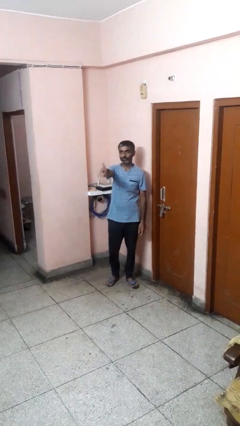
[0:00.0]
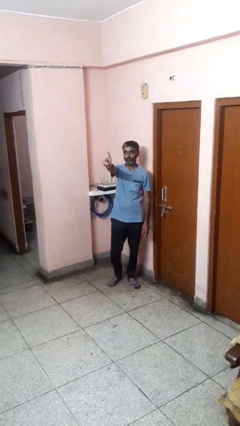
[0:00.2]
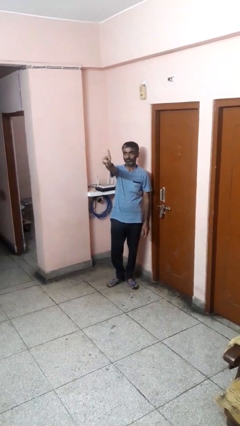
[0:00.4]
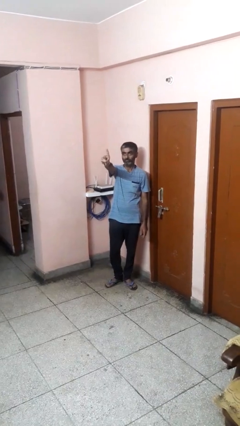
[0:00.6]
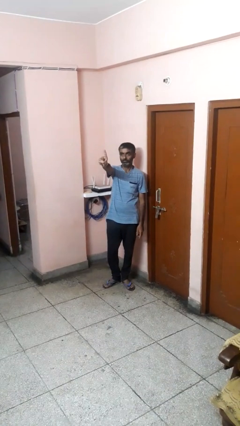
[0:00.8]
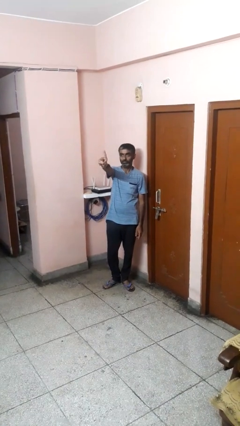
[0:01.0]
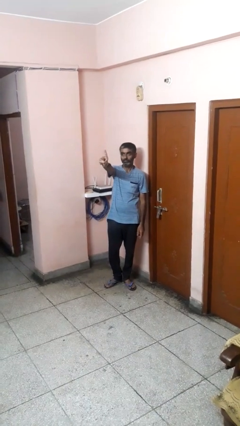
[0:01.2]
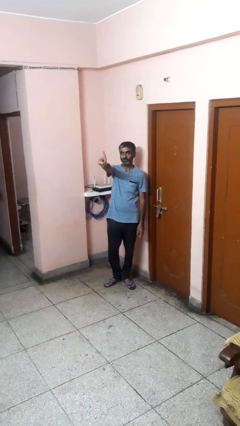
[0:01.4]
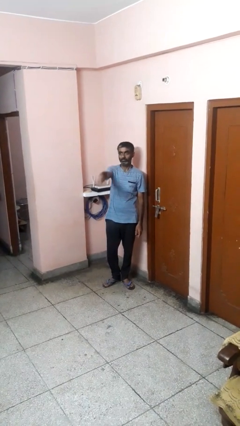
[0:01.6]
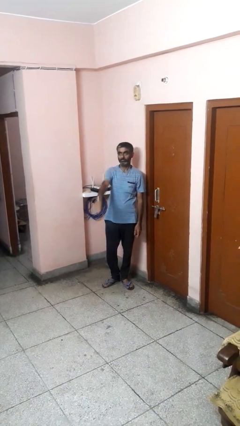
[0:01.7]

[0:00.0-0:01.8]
person gestures number one

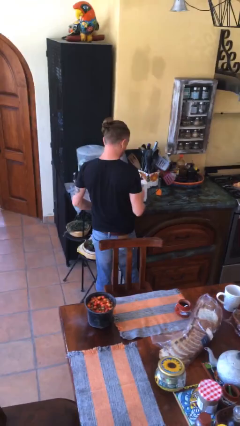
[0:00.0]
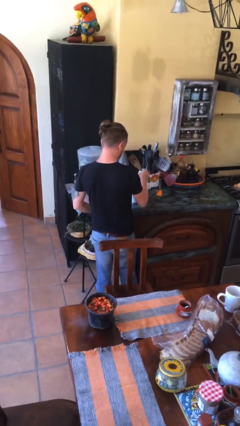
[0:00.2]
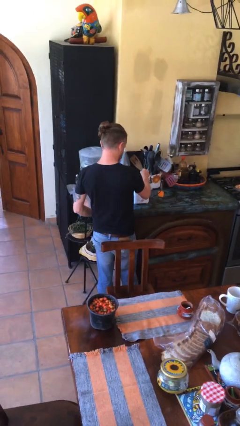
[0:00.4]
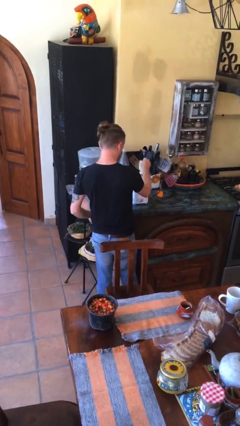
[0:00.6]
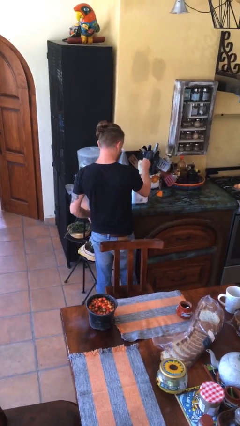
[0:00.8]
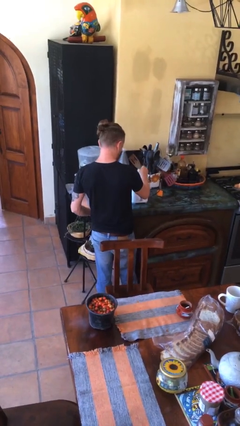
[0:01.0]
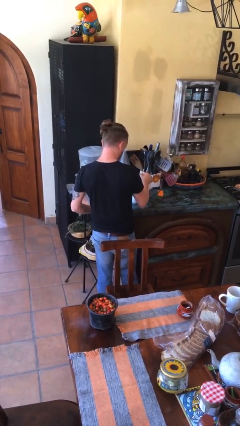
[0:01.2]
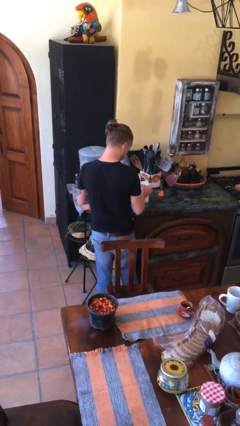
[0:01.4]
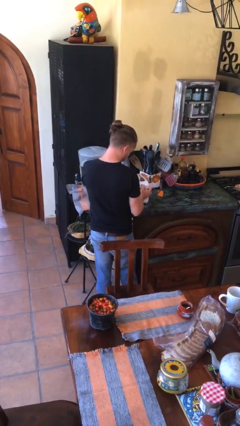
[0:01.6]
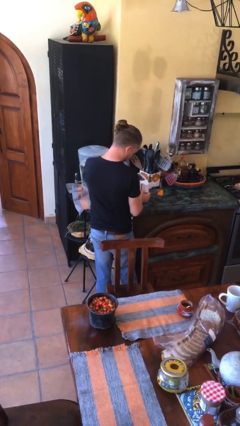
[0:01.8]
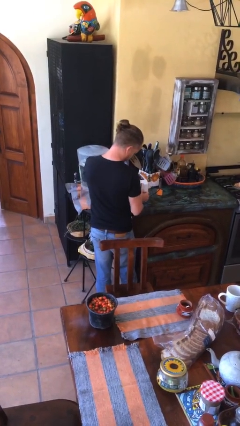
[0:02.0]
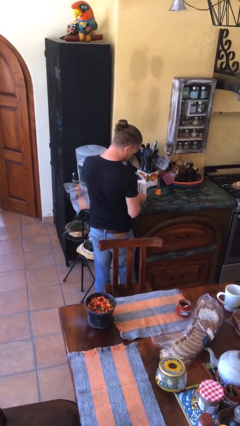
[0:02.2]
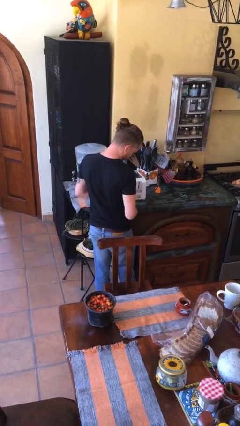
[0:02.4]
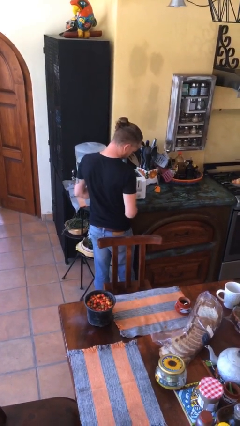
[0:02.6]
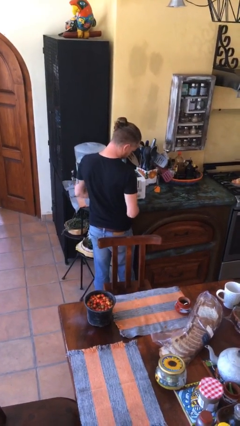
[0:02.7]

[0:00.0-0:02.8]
person puts object into toaster

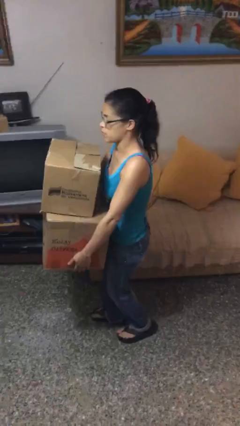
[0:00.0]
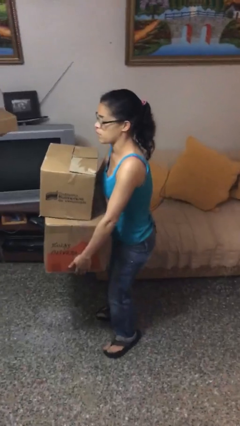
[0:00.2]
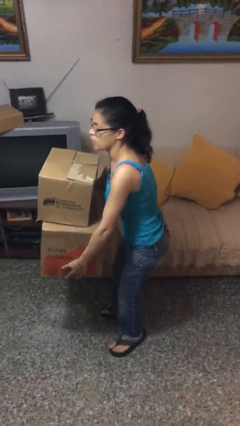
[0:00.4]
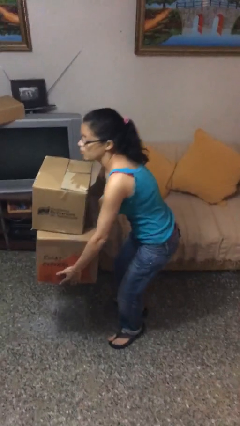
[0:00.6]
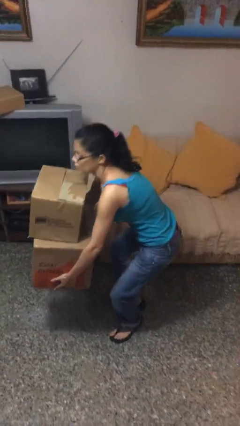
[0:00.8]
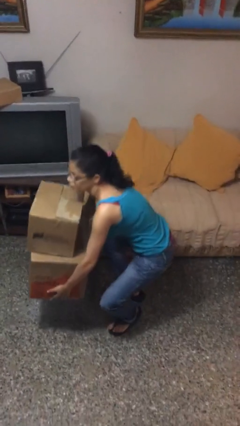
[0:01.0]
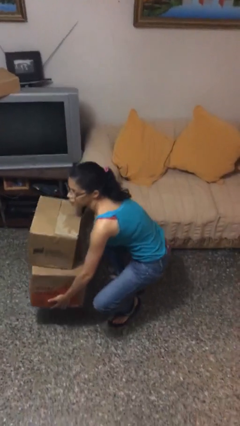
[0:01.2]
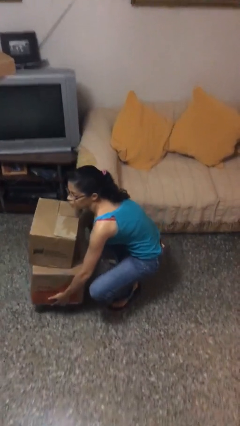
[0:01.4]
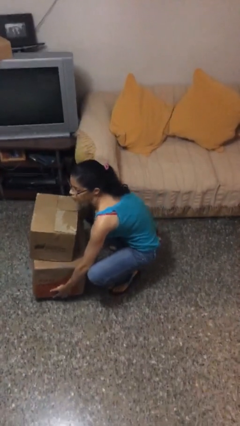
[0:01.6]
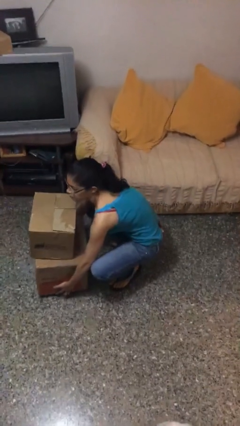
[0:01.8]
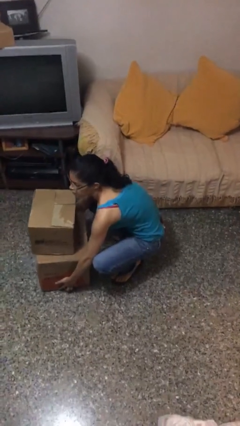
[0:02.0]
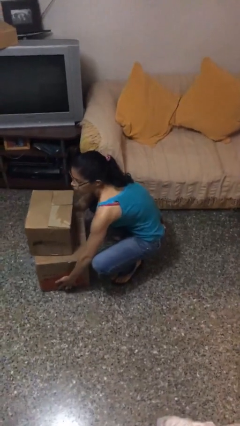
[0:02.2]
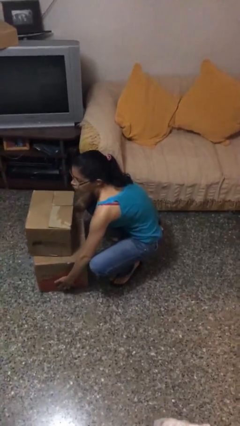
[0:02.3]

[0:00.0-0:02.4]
person puts down object on floor

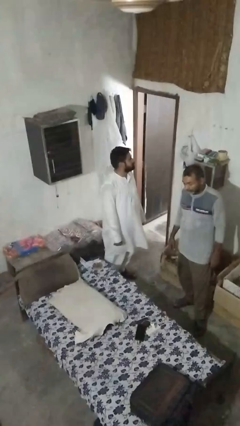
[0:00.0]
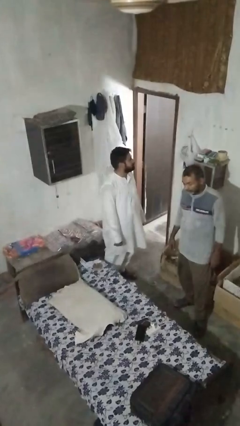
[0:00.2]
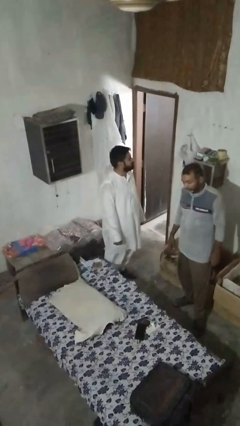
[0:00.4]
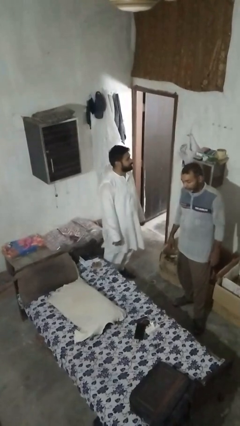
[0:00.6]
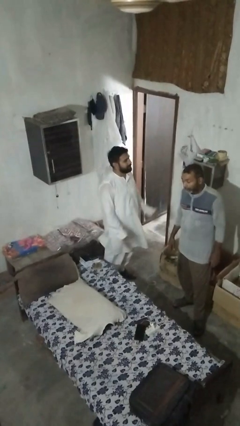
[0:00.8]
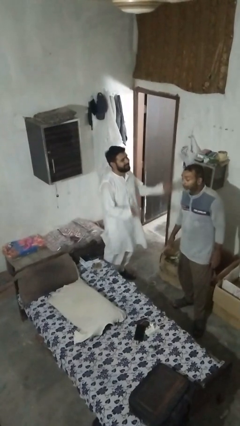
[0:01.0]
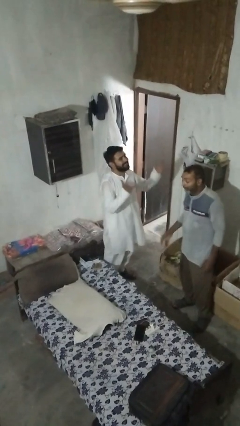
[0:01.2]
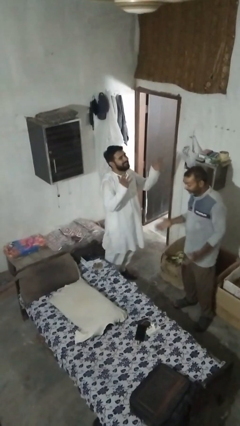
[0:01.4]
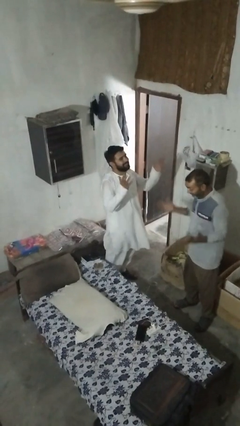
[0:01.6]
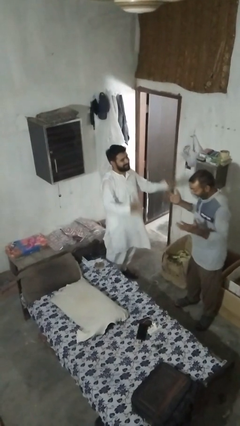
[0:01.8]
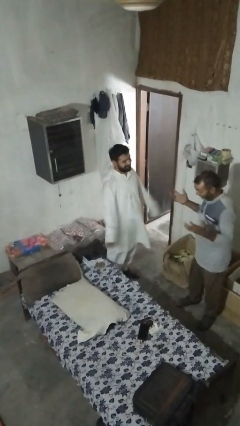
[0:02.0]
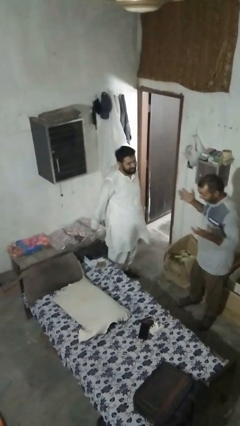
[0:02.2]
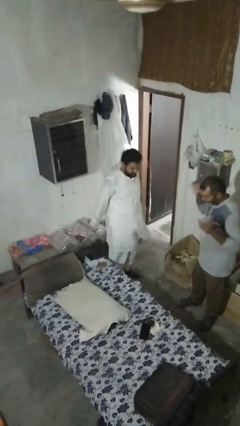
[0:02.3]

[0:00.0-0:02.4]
person laughs with person

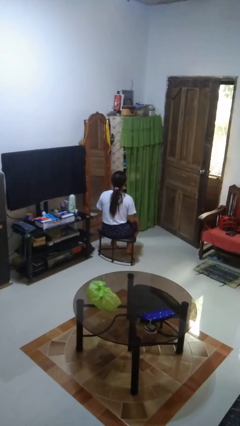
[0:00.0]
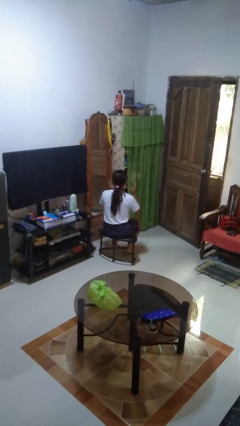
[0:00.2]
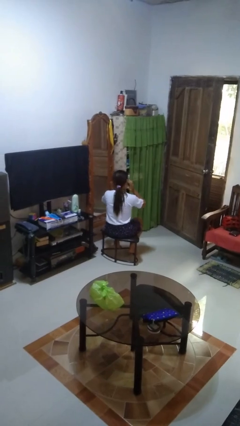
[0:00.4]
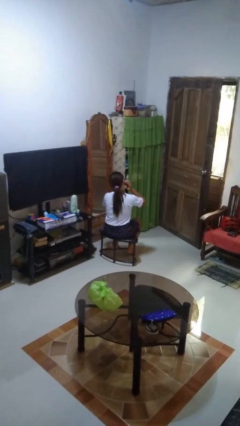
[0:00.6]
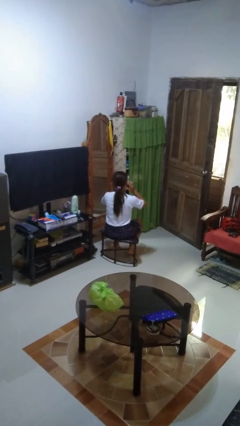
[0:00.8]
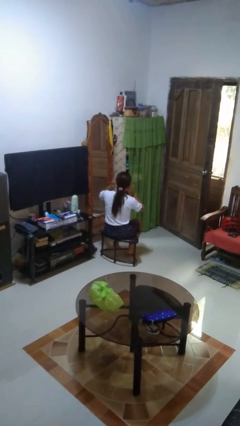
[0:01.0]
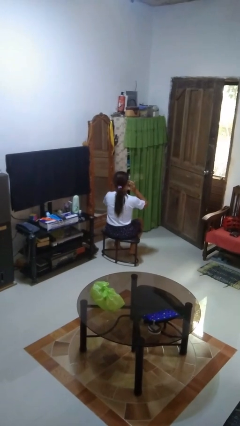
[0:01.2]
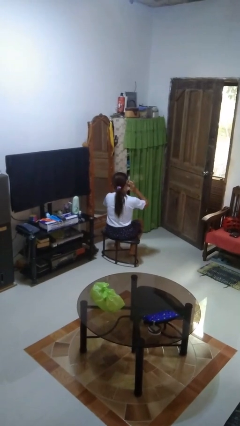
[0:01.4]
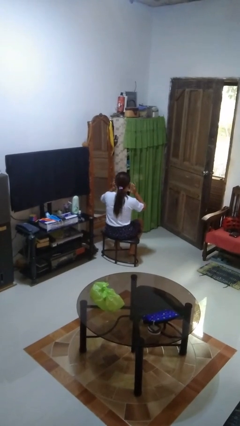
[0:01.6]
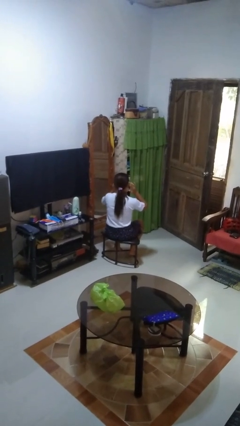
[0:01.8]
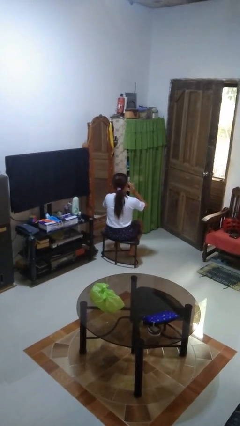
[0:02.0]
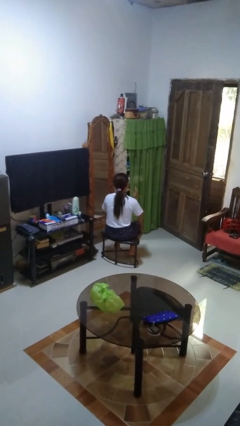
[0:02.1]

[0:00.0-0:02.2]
person puts fingers in ear

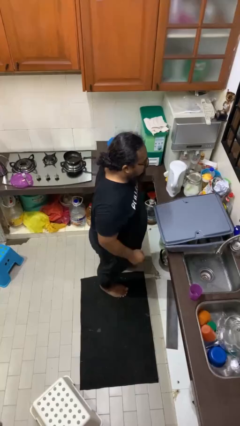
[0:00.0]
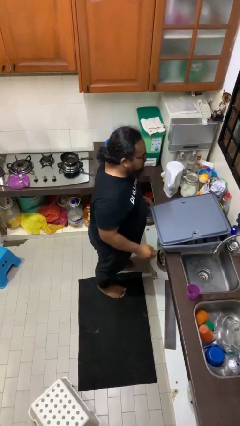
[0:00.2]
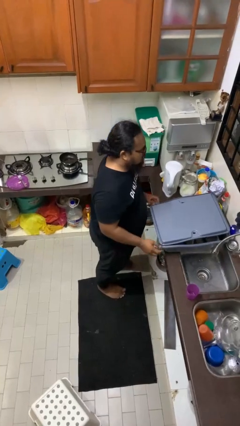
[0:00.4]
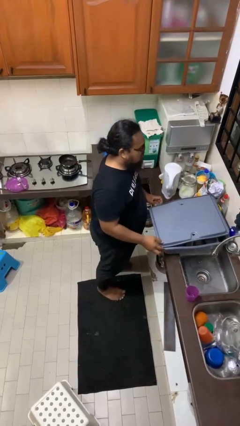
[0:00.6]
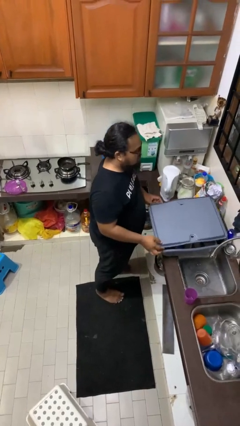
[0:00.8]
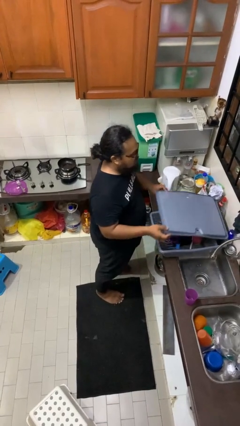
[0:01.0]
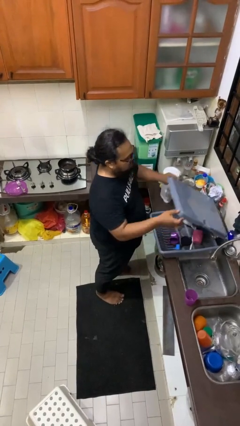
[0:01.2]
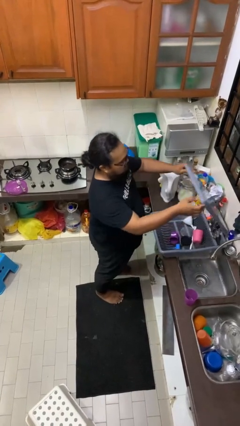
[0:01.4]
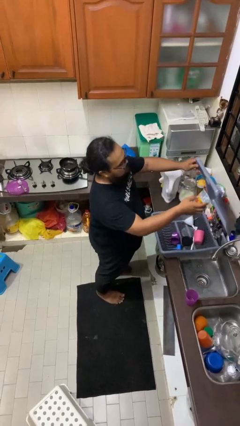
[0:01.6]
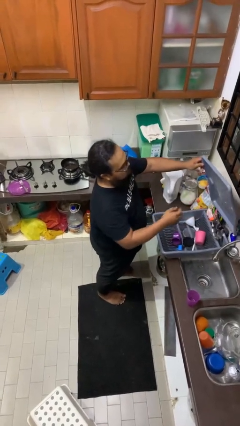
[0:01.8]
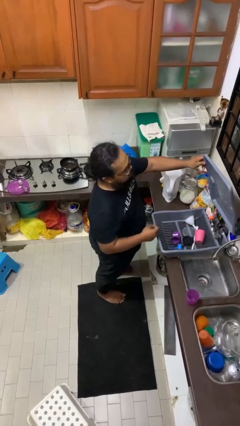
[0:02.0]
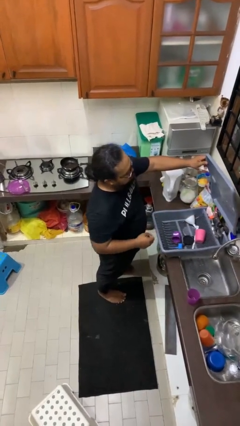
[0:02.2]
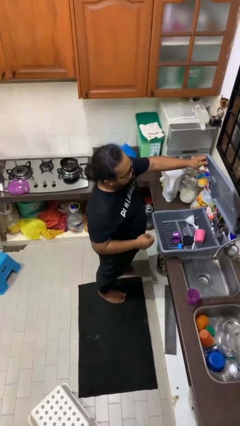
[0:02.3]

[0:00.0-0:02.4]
person opens dishwasher

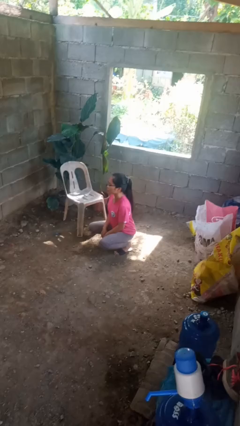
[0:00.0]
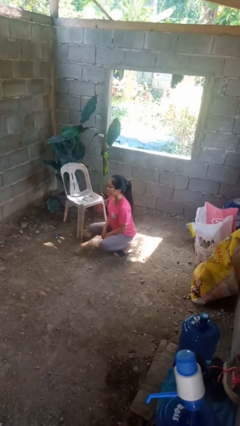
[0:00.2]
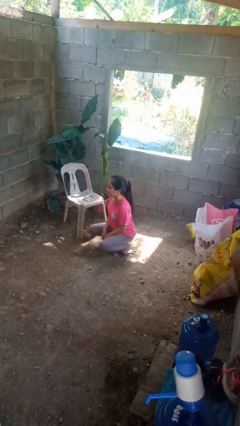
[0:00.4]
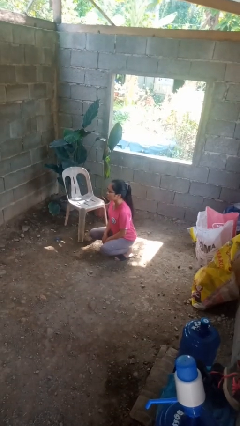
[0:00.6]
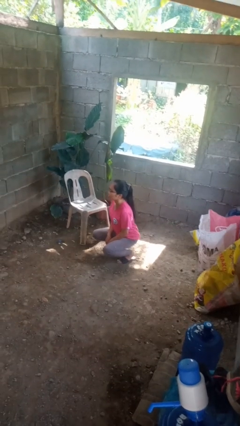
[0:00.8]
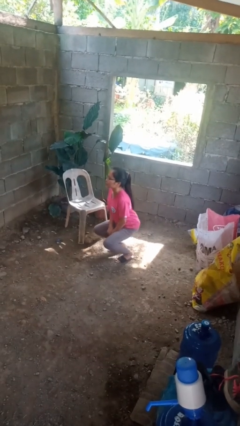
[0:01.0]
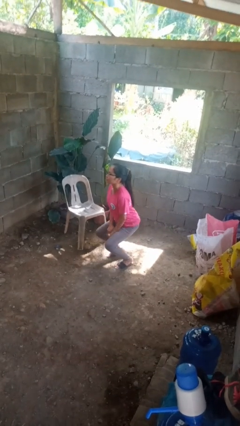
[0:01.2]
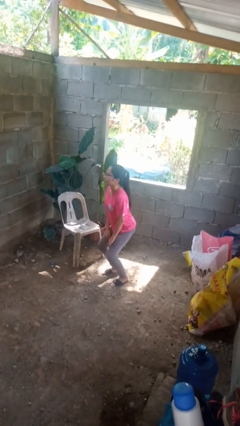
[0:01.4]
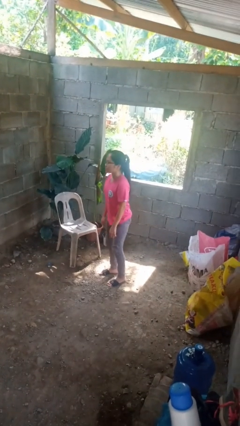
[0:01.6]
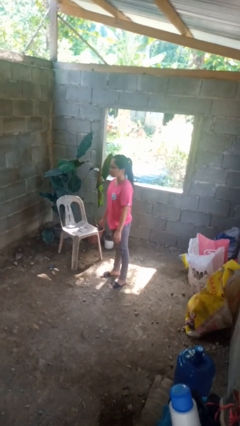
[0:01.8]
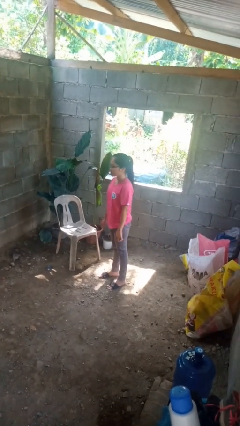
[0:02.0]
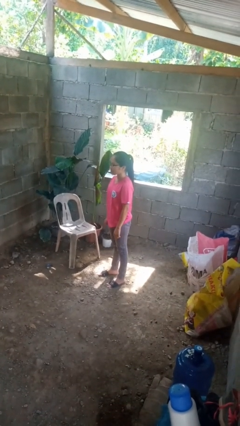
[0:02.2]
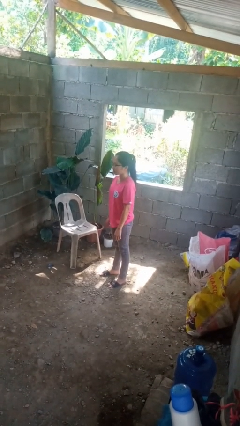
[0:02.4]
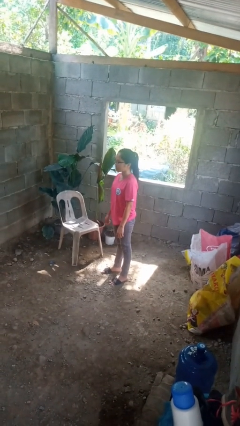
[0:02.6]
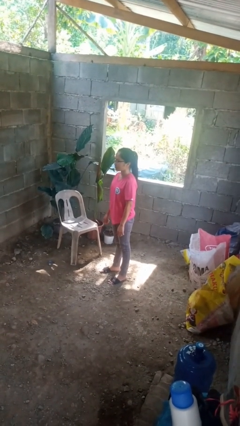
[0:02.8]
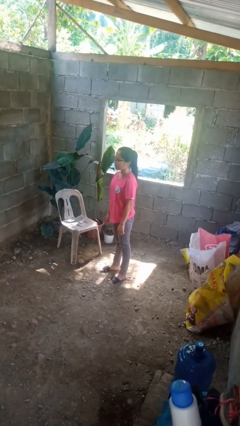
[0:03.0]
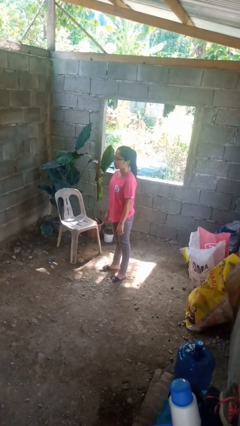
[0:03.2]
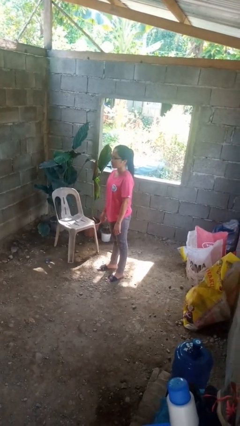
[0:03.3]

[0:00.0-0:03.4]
person stands up
